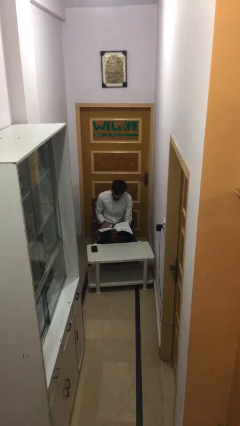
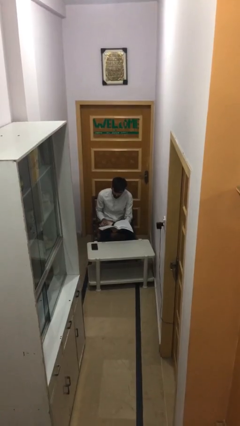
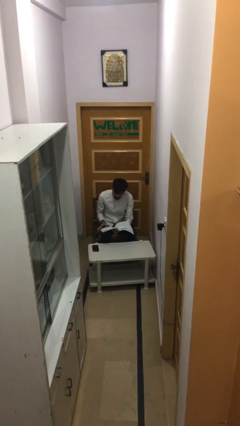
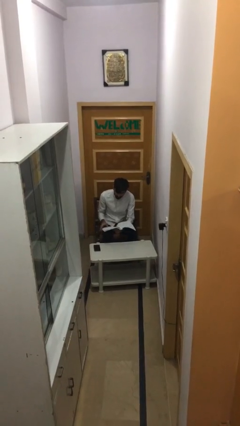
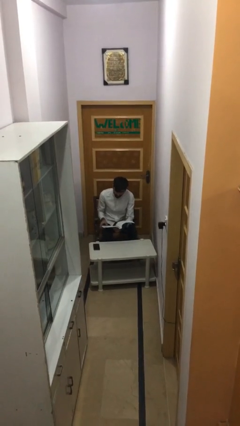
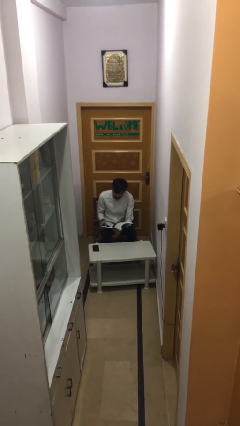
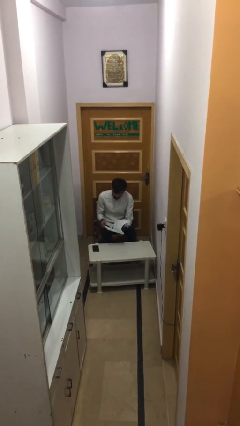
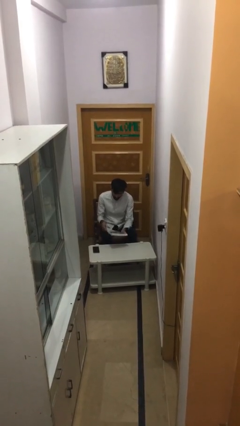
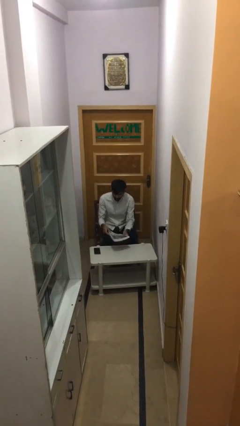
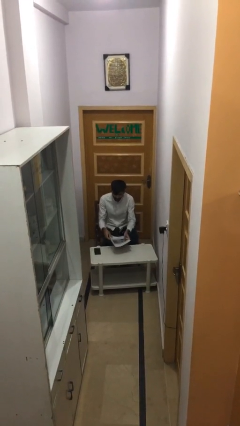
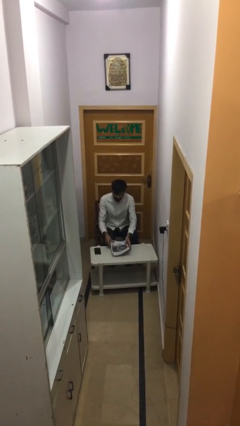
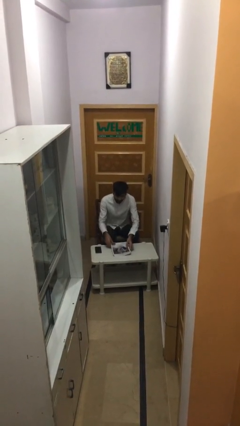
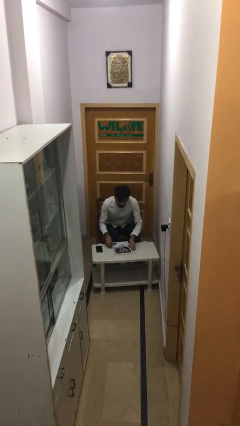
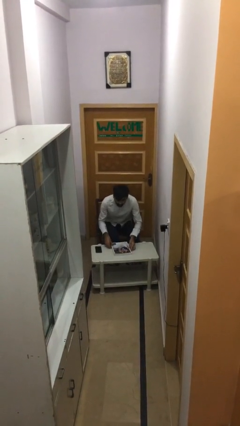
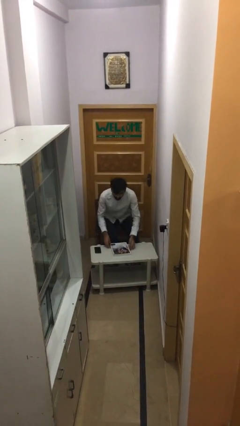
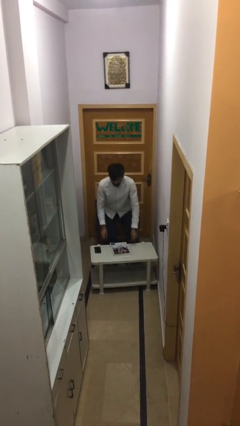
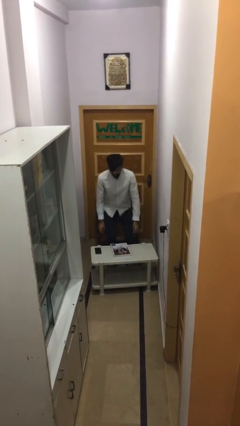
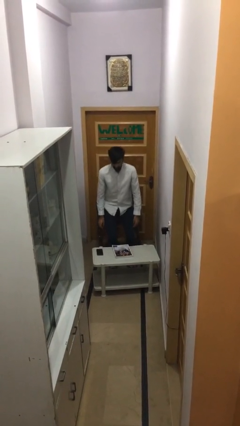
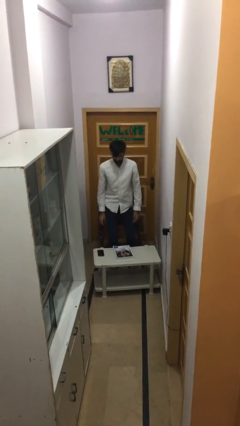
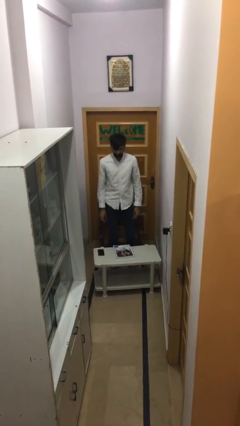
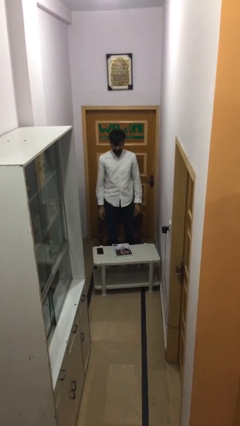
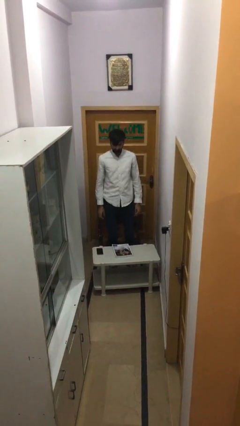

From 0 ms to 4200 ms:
person stands up

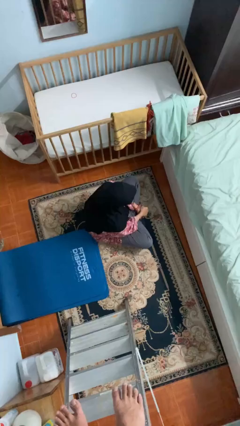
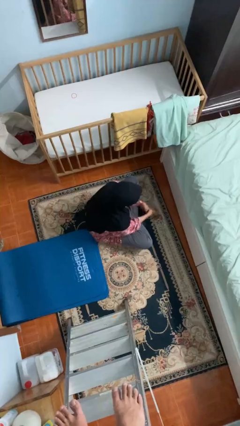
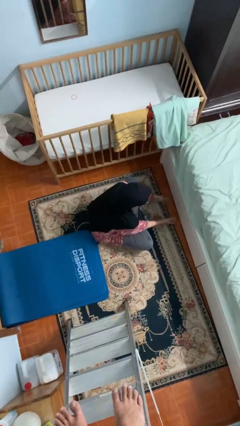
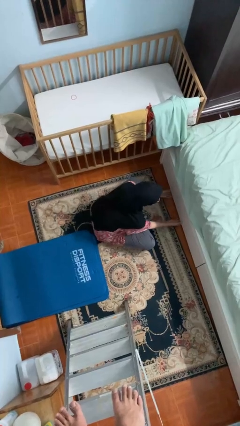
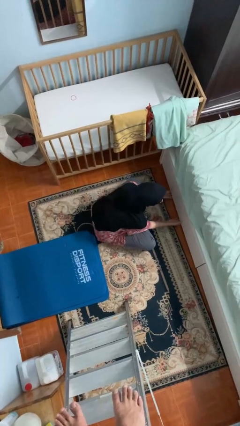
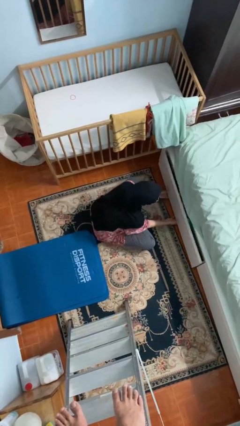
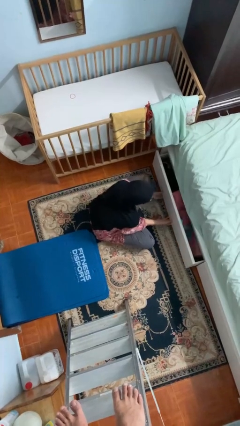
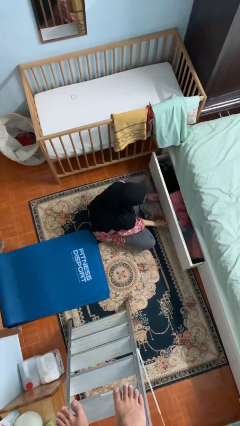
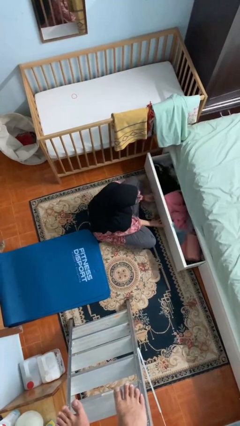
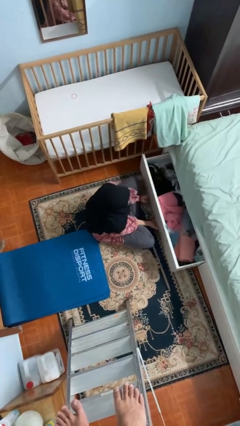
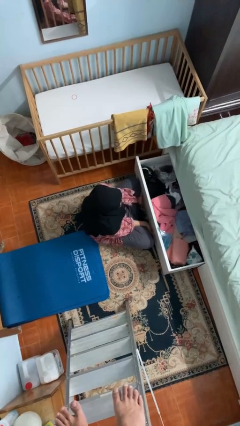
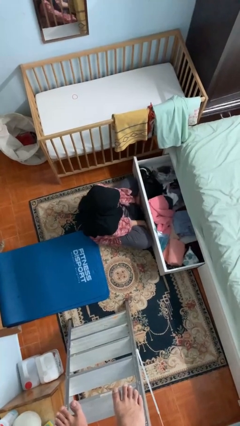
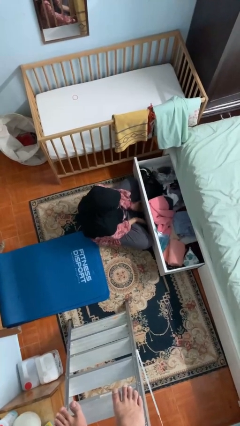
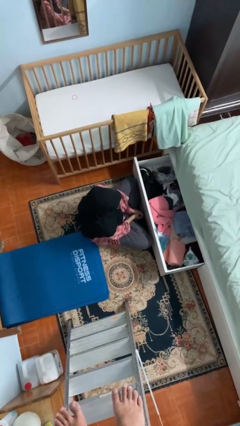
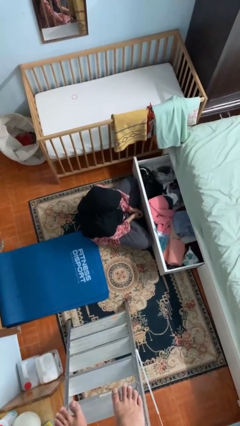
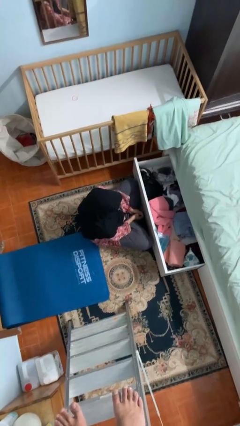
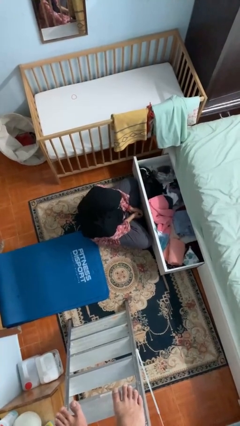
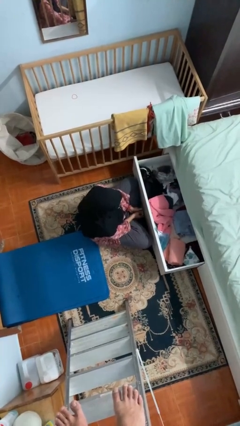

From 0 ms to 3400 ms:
person opens dresser drawer

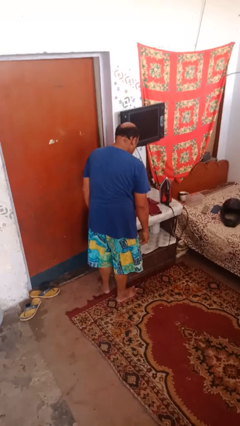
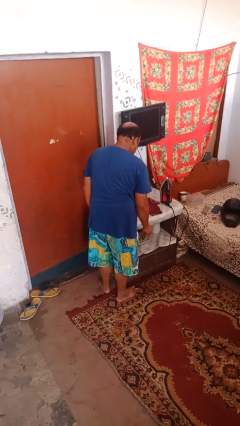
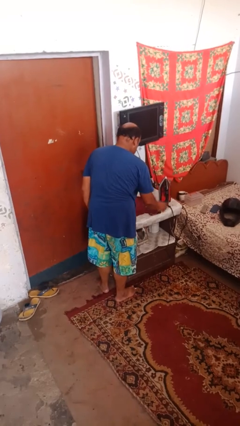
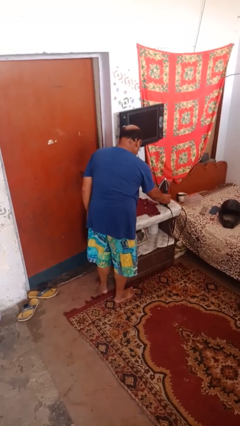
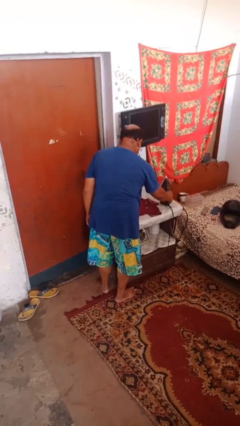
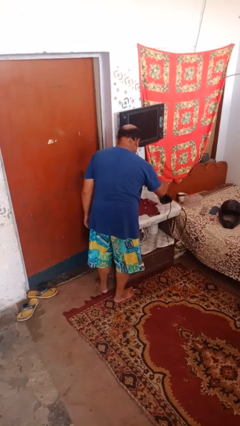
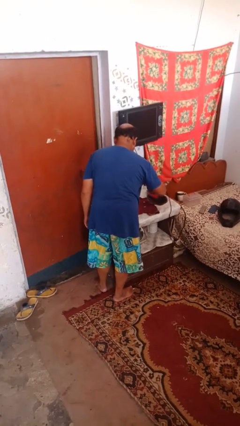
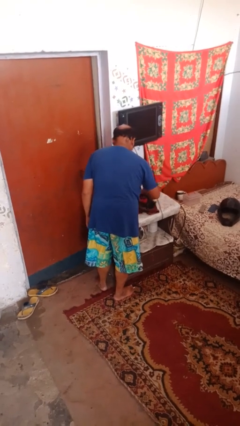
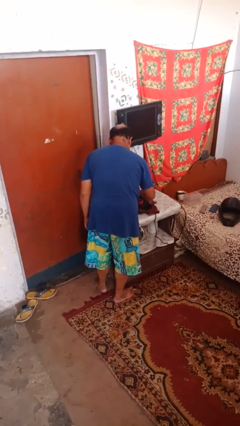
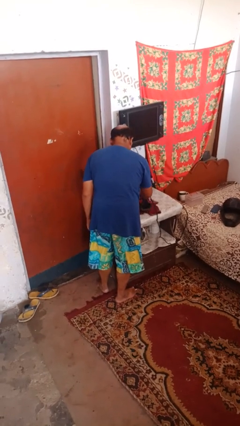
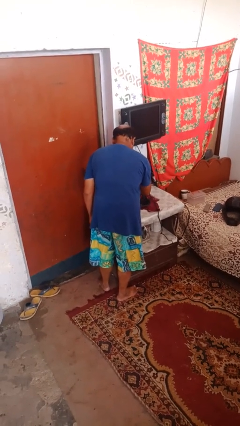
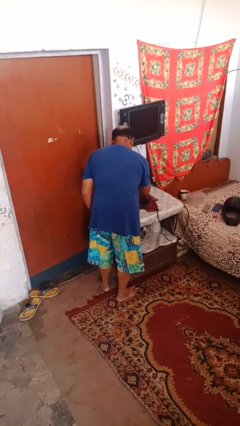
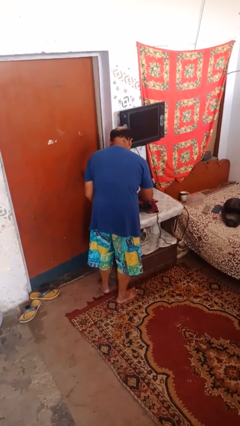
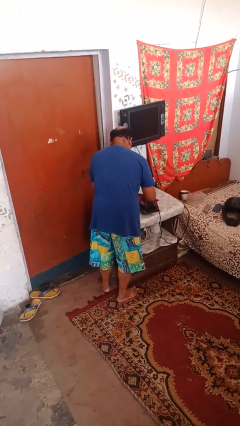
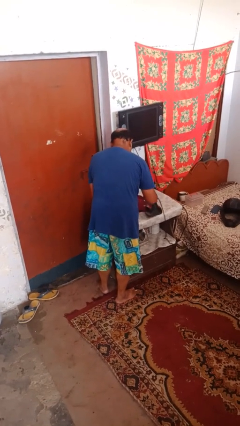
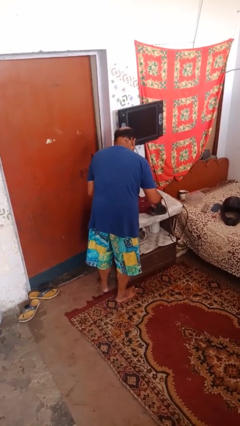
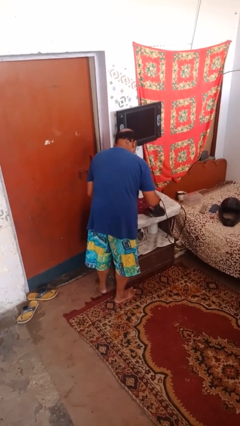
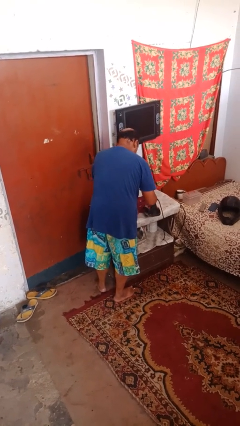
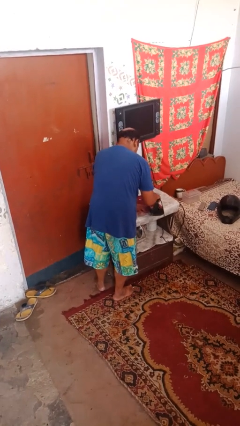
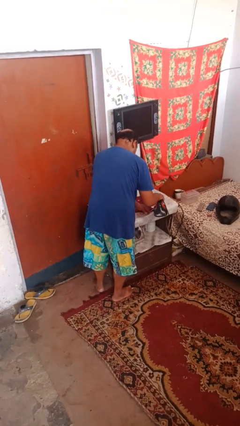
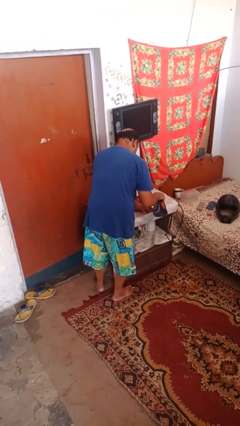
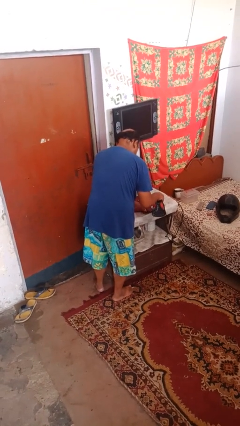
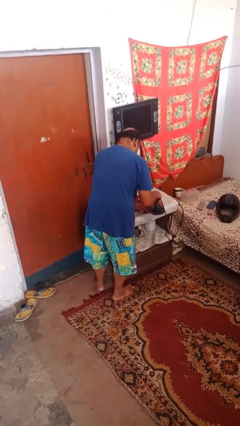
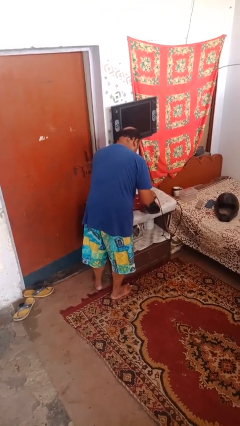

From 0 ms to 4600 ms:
person irons clothes

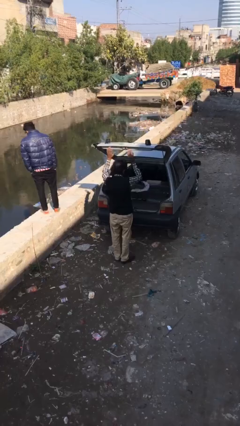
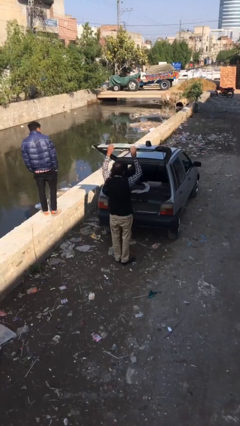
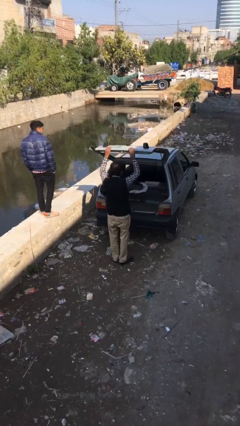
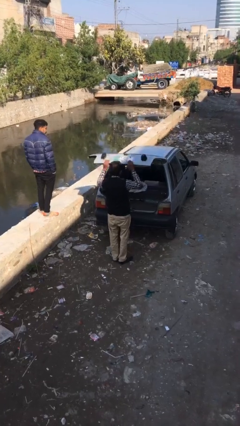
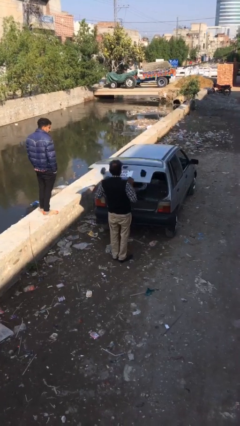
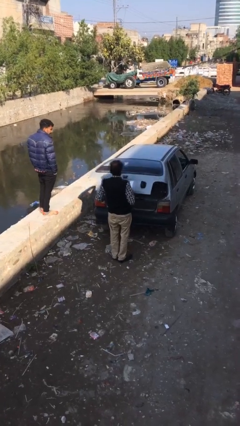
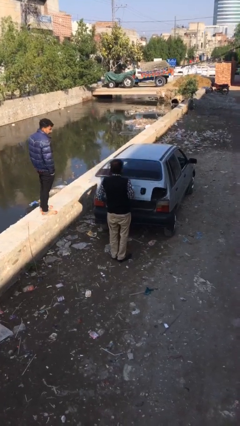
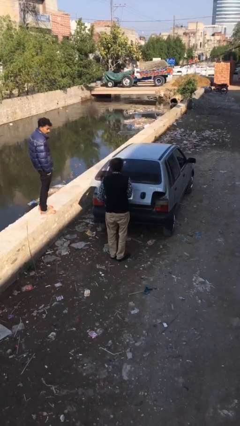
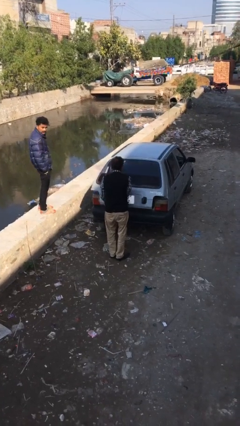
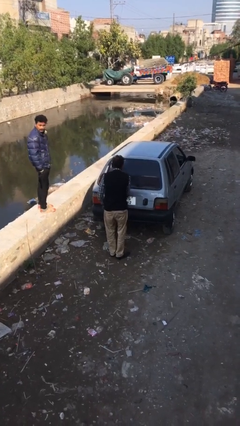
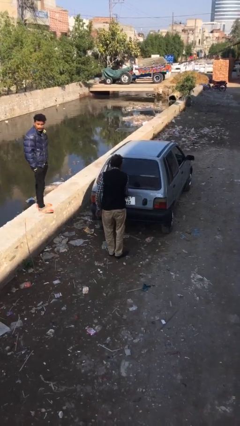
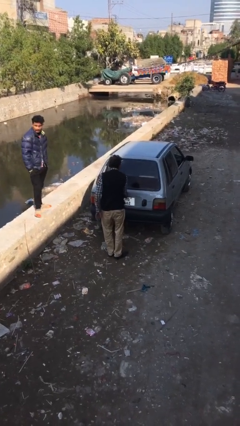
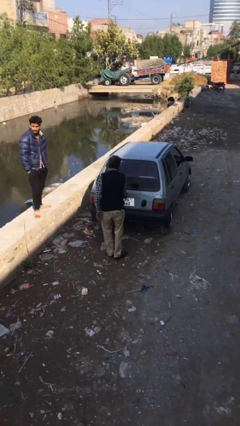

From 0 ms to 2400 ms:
person closes car trunk

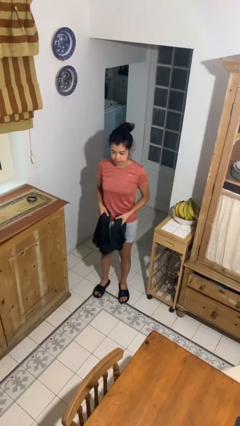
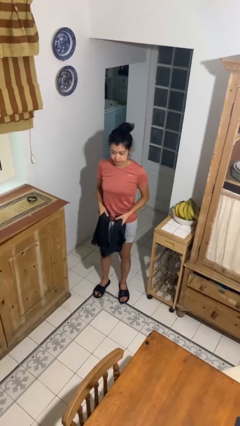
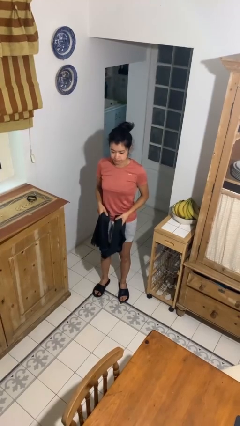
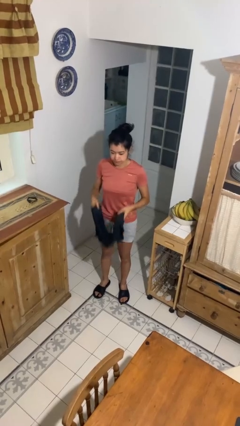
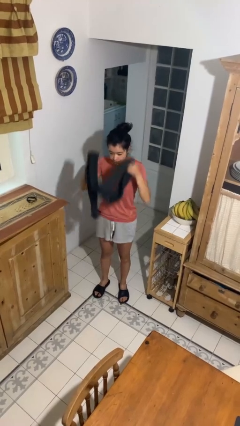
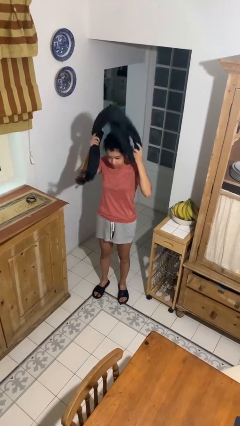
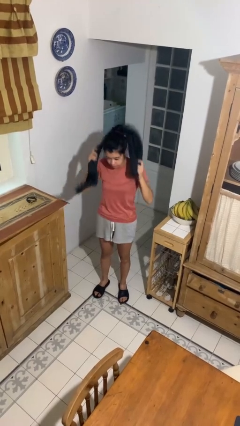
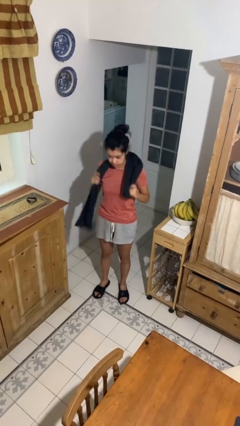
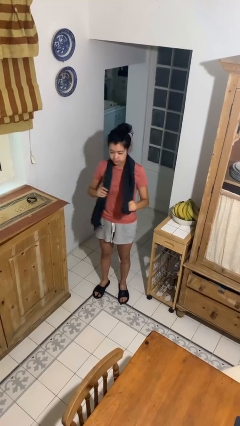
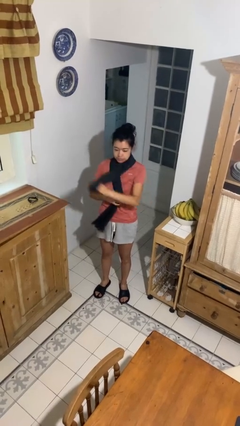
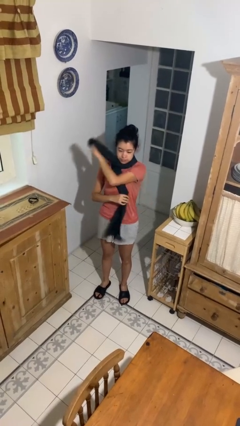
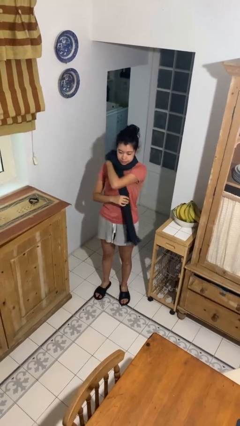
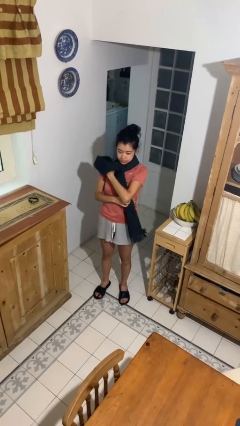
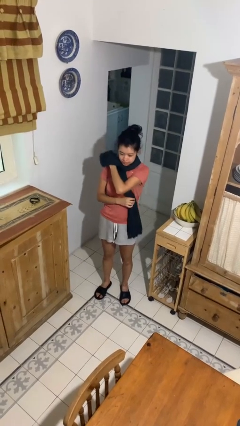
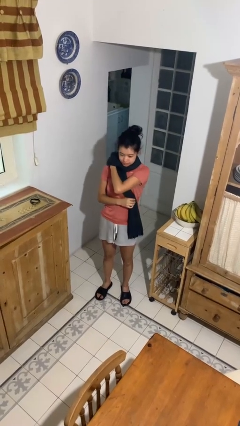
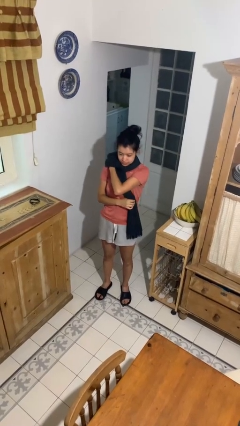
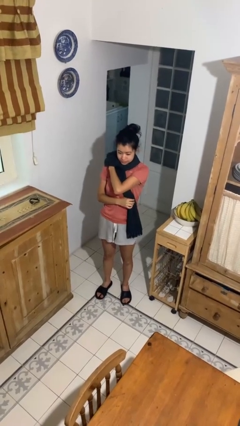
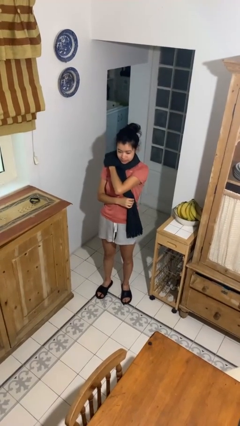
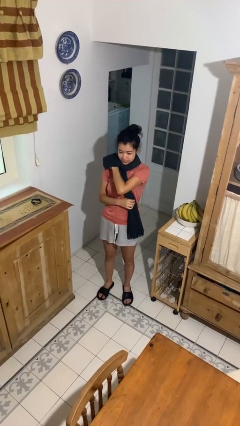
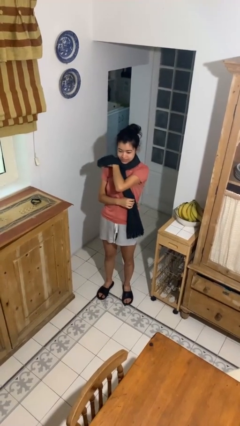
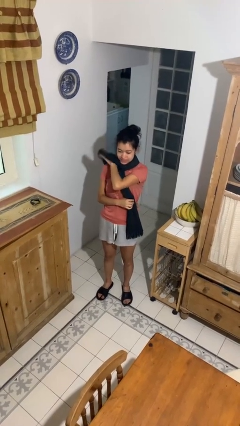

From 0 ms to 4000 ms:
person puts on scarf
